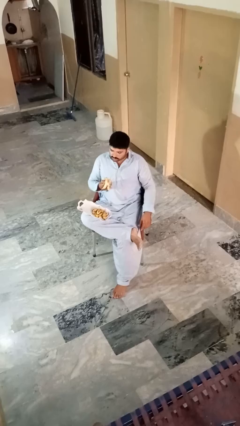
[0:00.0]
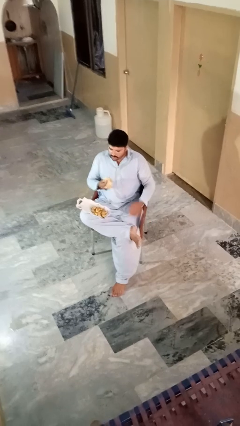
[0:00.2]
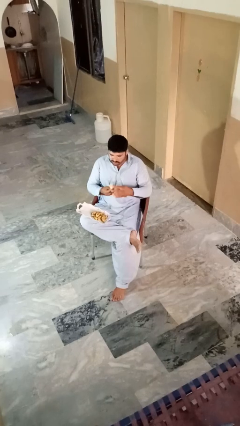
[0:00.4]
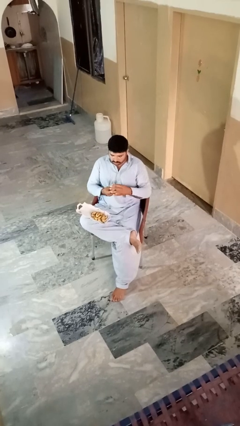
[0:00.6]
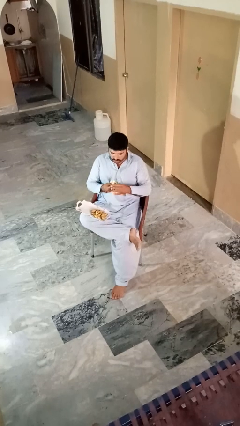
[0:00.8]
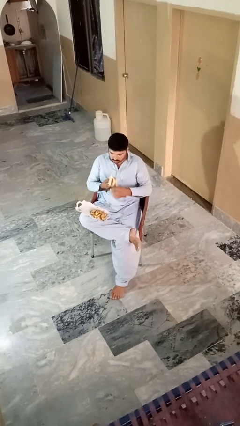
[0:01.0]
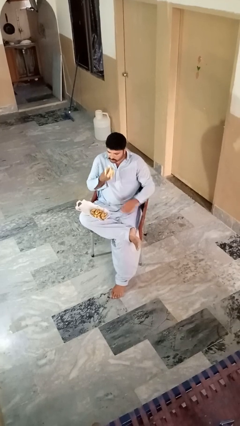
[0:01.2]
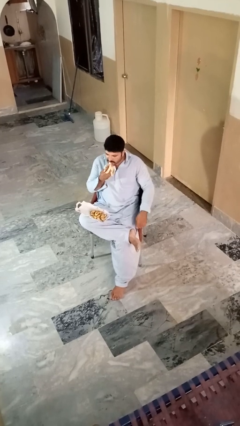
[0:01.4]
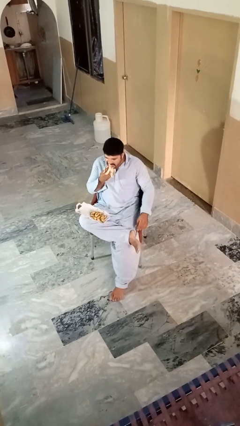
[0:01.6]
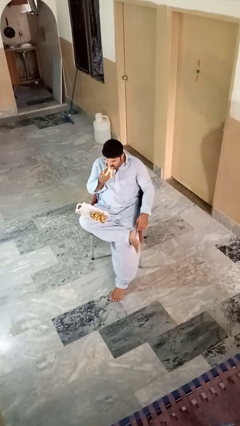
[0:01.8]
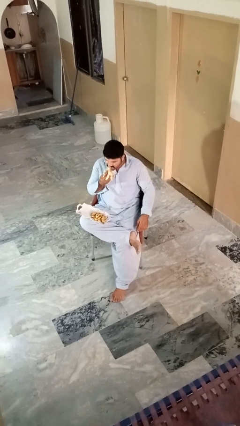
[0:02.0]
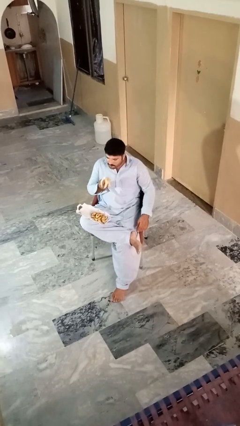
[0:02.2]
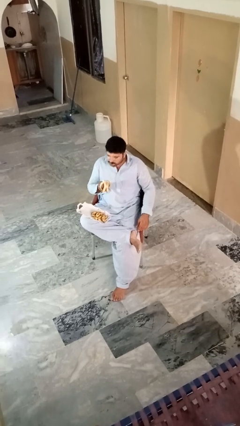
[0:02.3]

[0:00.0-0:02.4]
person eats banana

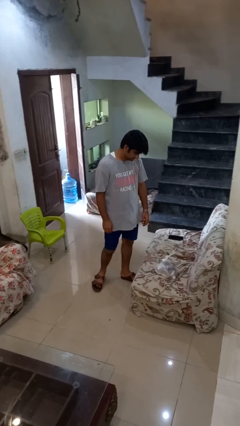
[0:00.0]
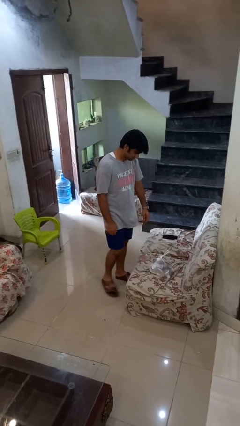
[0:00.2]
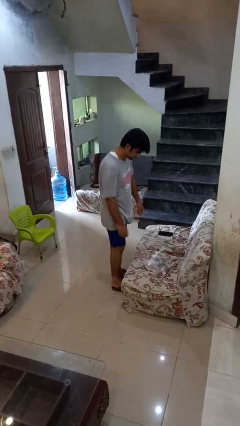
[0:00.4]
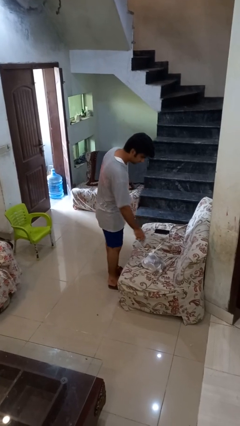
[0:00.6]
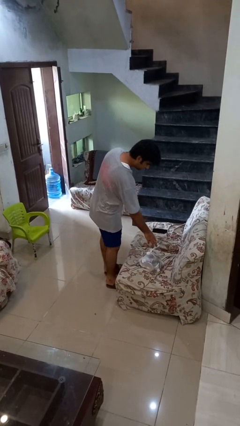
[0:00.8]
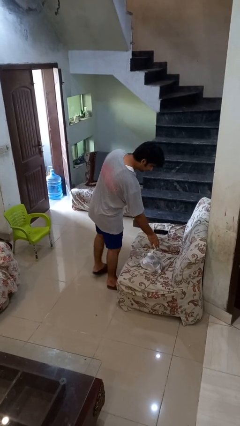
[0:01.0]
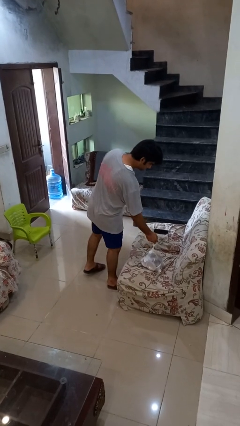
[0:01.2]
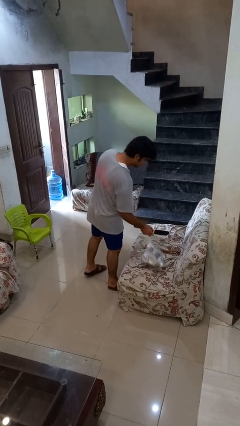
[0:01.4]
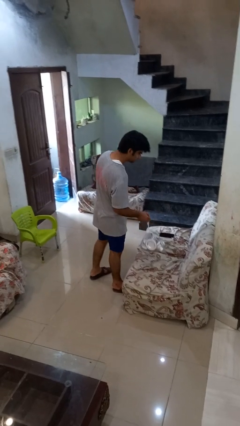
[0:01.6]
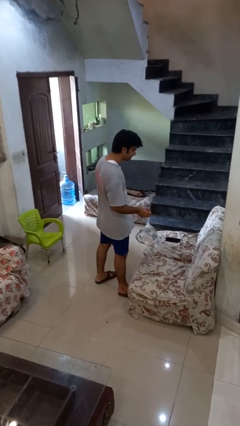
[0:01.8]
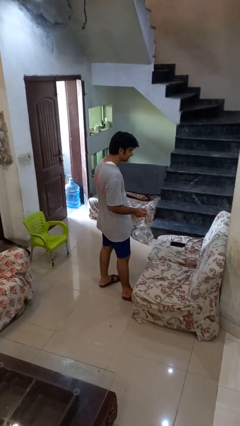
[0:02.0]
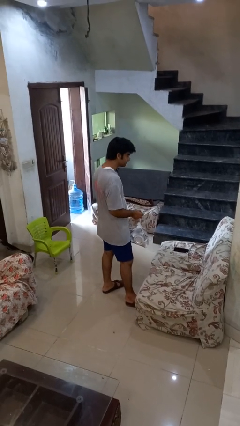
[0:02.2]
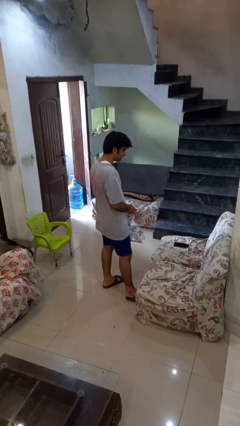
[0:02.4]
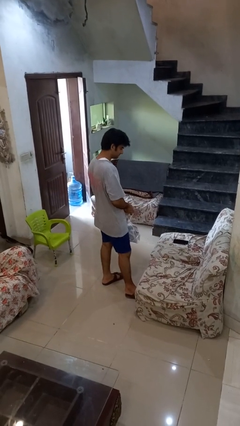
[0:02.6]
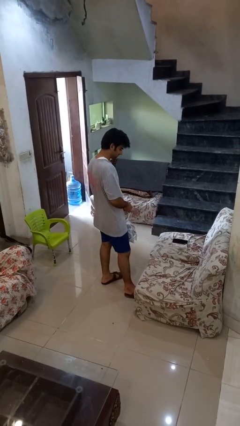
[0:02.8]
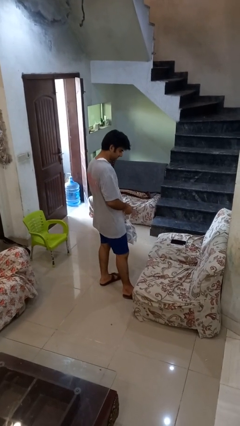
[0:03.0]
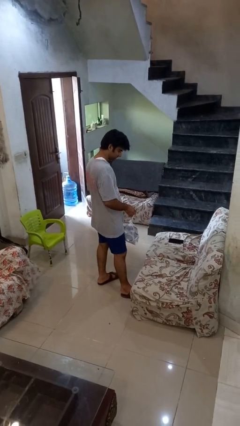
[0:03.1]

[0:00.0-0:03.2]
person picks up object from couch

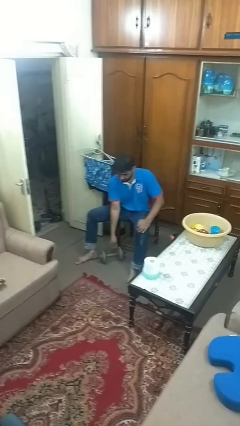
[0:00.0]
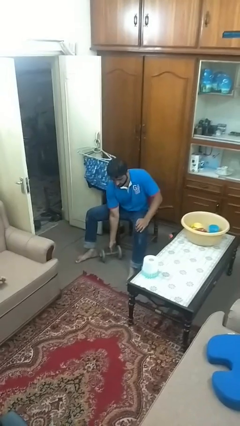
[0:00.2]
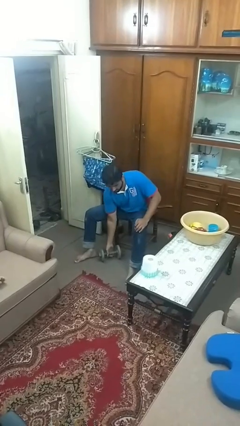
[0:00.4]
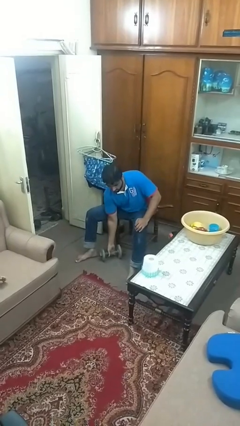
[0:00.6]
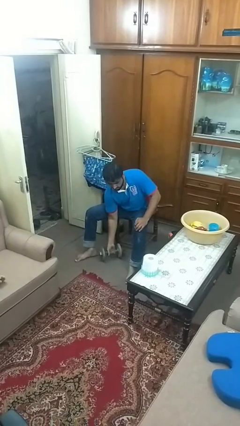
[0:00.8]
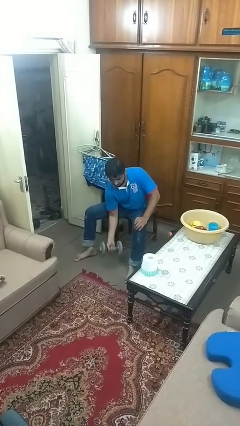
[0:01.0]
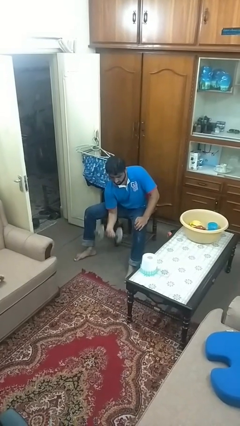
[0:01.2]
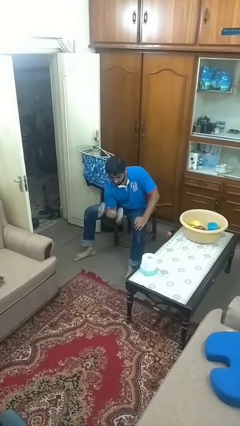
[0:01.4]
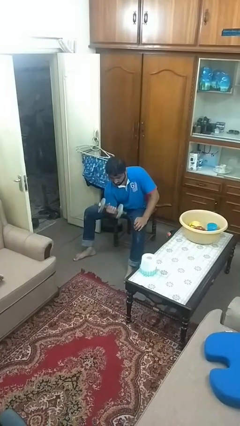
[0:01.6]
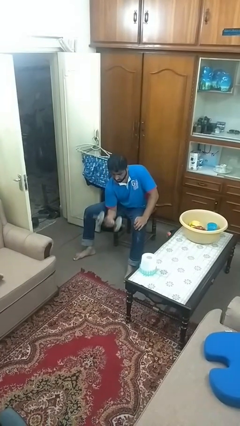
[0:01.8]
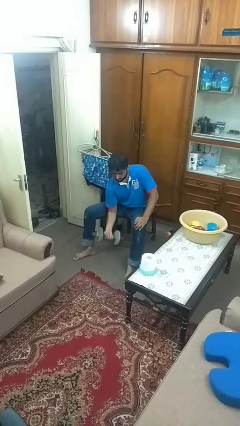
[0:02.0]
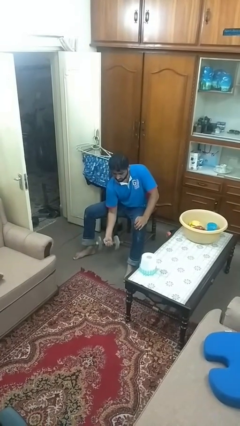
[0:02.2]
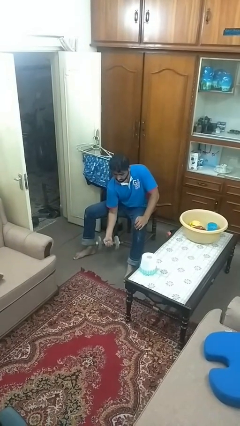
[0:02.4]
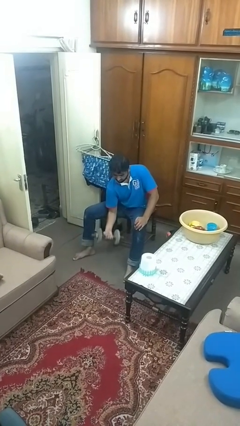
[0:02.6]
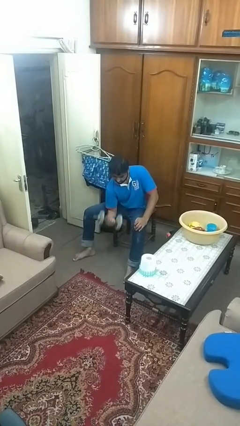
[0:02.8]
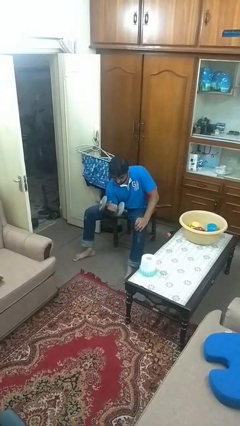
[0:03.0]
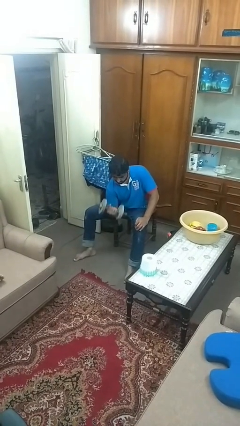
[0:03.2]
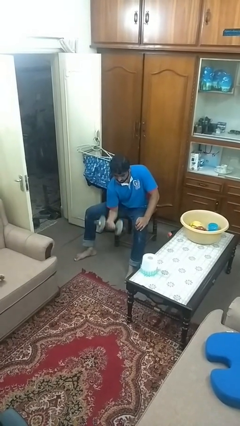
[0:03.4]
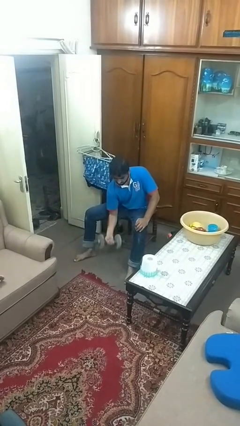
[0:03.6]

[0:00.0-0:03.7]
person lifts dumbbells

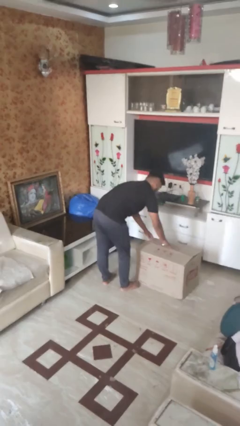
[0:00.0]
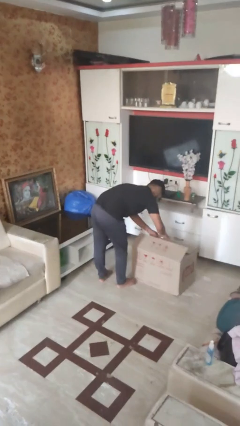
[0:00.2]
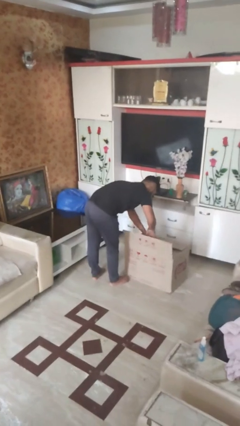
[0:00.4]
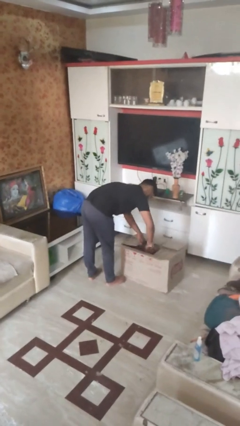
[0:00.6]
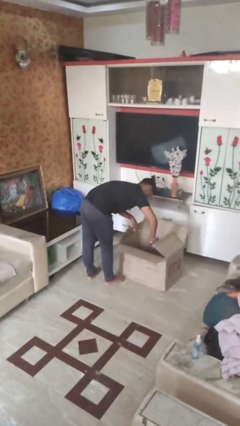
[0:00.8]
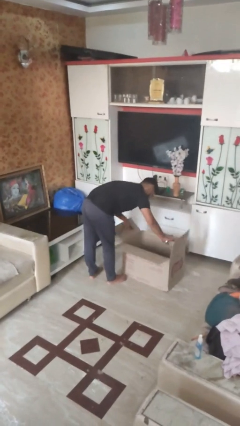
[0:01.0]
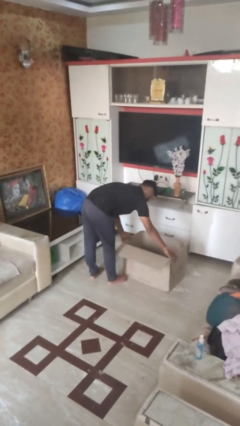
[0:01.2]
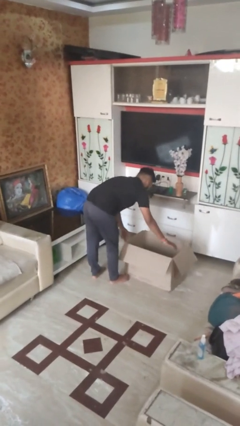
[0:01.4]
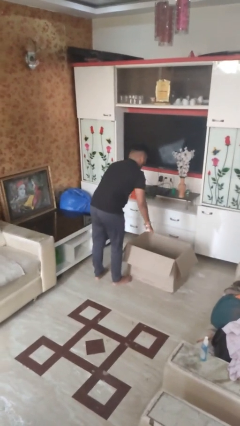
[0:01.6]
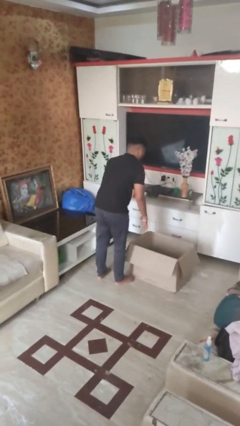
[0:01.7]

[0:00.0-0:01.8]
person opens box

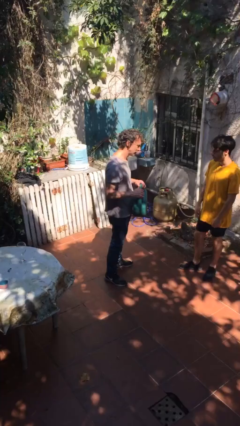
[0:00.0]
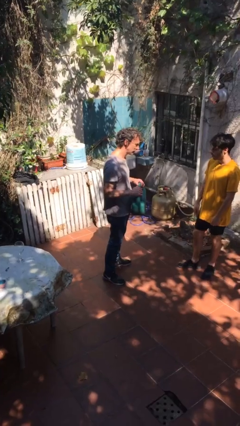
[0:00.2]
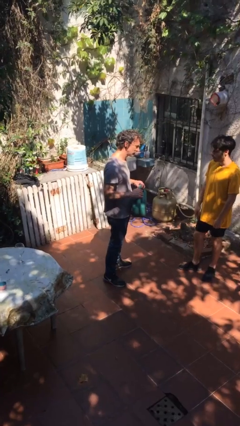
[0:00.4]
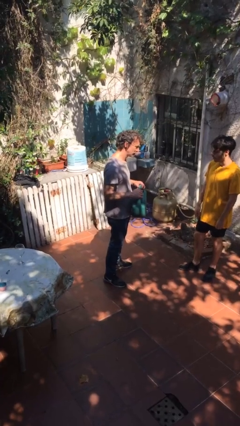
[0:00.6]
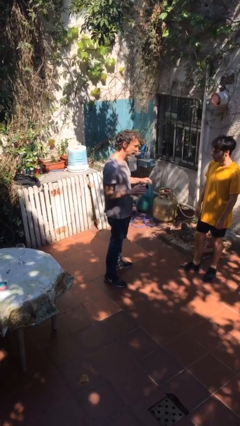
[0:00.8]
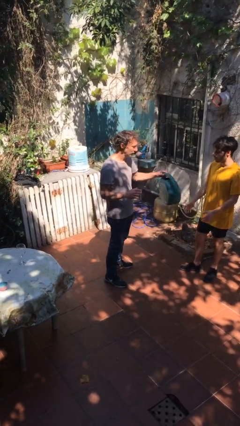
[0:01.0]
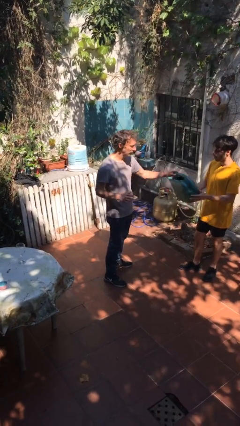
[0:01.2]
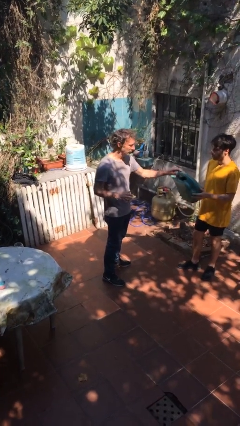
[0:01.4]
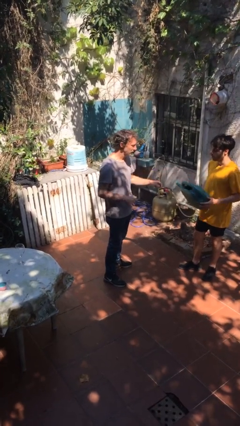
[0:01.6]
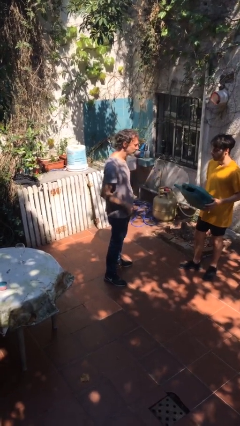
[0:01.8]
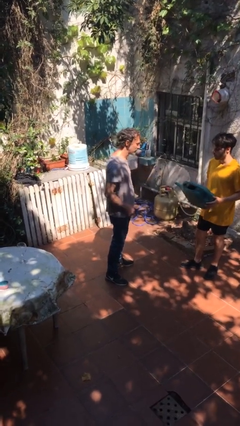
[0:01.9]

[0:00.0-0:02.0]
person transfers object to person

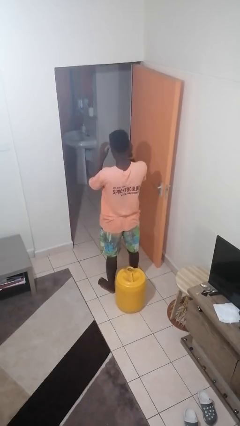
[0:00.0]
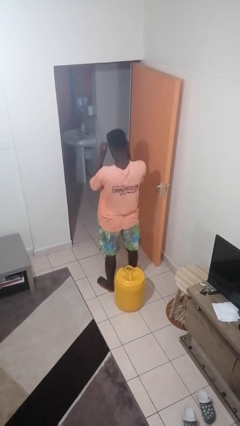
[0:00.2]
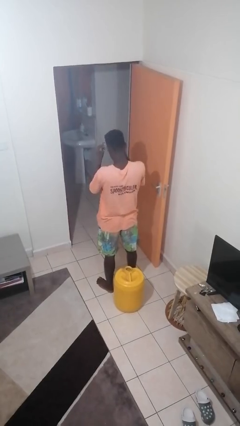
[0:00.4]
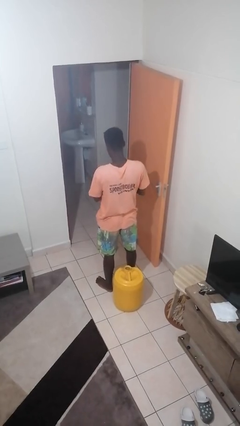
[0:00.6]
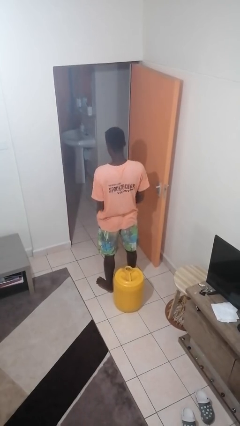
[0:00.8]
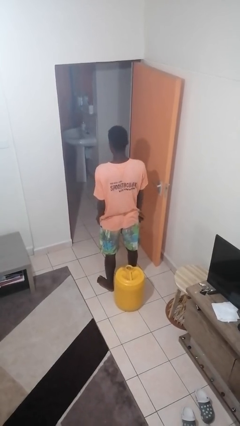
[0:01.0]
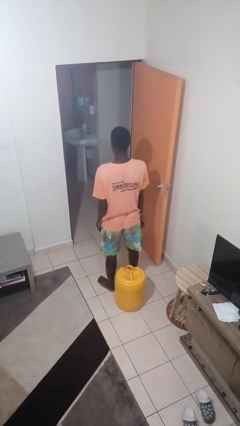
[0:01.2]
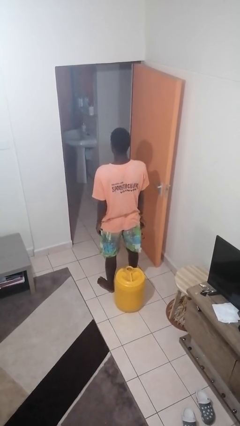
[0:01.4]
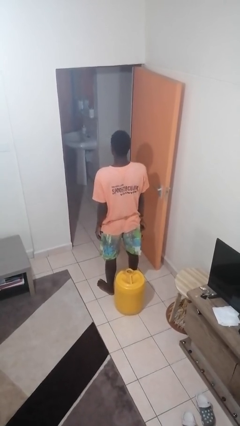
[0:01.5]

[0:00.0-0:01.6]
person takes off glasses

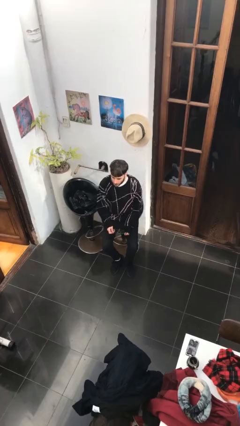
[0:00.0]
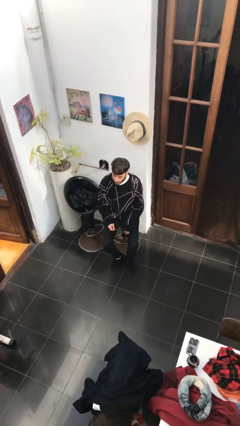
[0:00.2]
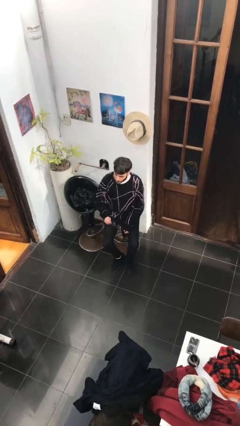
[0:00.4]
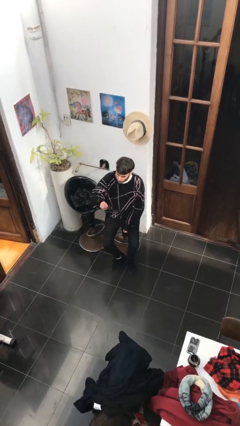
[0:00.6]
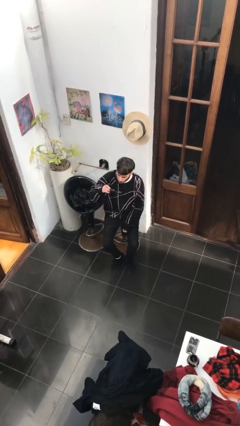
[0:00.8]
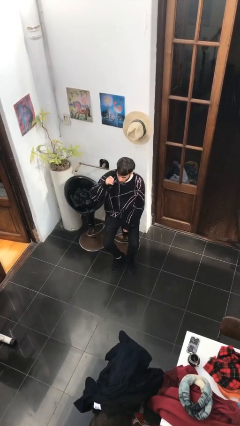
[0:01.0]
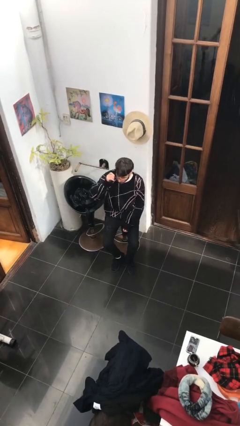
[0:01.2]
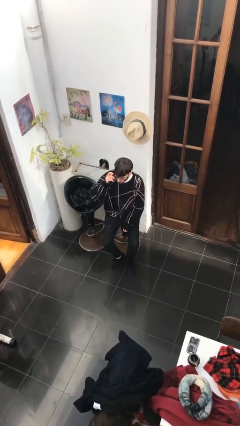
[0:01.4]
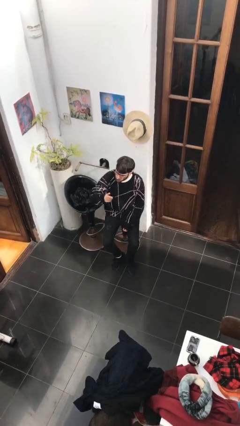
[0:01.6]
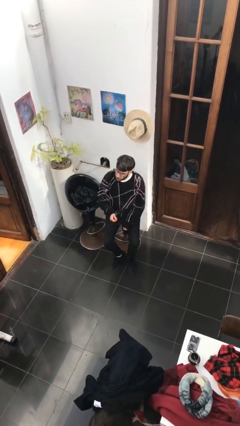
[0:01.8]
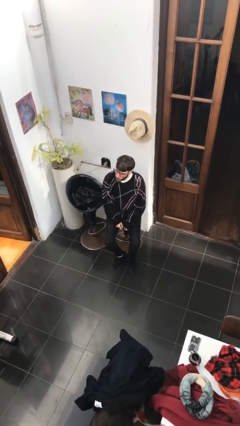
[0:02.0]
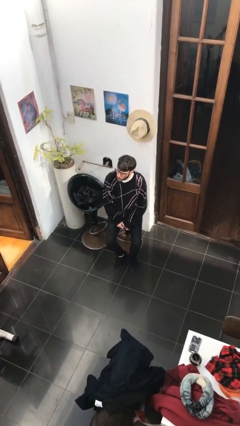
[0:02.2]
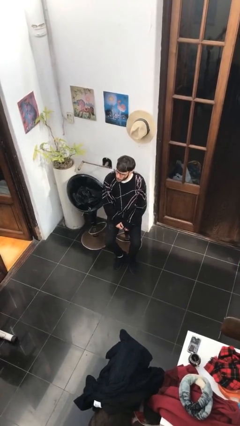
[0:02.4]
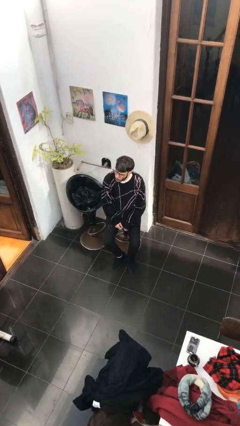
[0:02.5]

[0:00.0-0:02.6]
person puts on glasses
